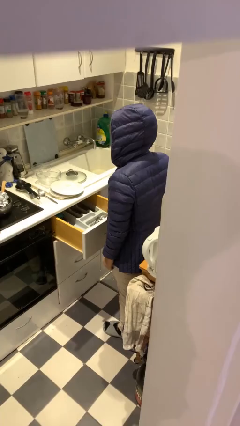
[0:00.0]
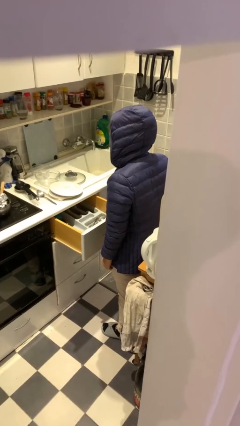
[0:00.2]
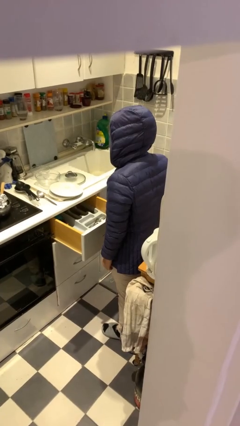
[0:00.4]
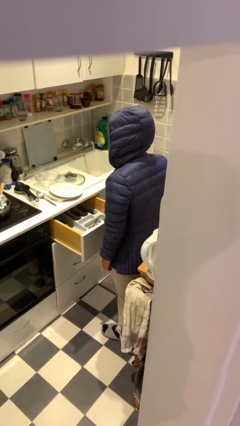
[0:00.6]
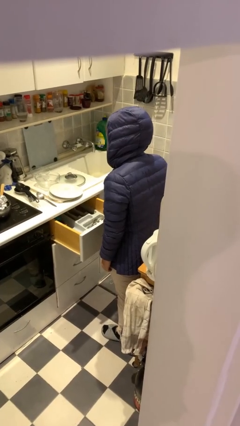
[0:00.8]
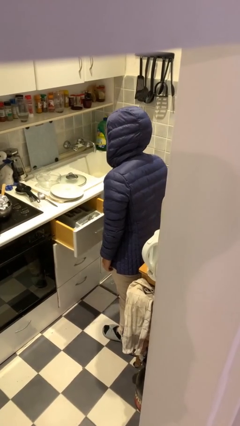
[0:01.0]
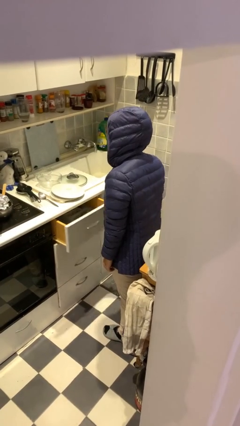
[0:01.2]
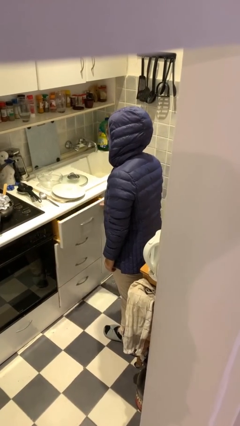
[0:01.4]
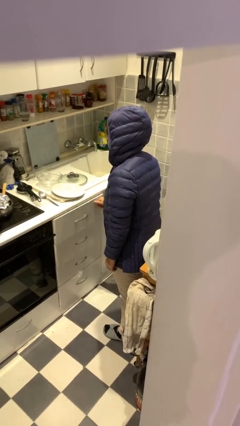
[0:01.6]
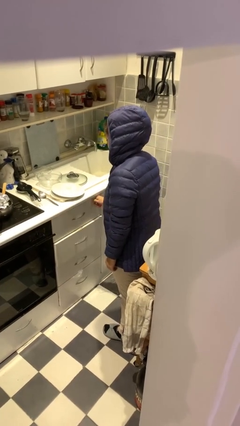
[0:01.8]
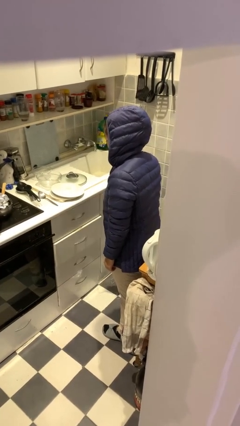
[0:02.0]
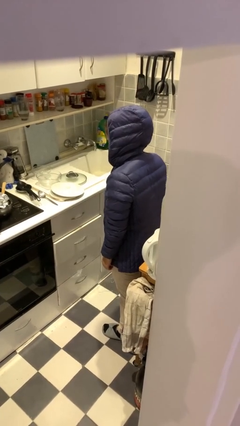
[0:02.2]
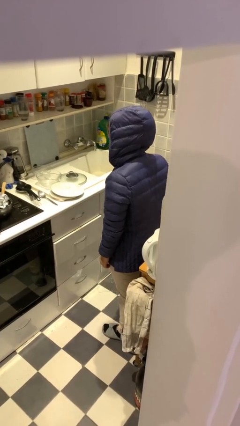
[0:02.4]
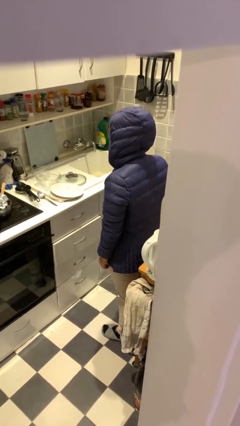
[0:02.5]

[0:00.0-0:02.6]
person closes kitchen drawer

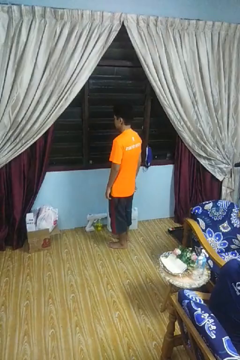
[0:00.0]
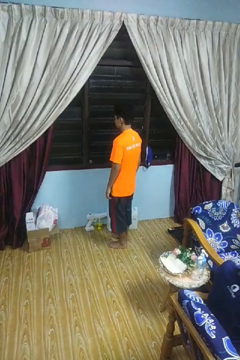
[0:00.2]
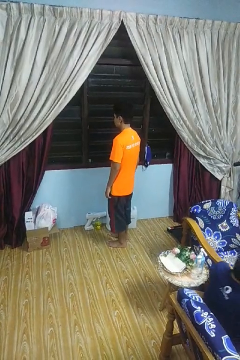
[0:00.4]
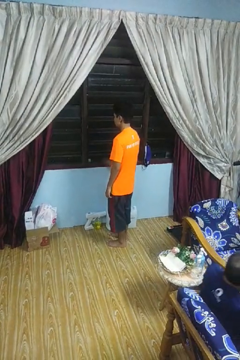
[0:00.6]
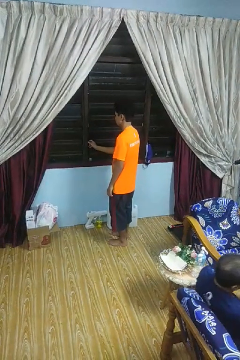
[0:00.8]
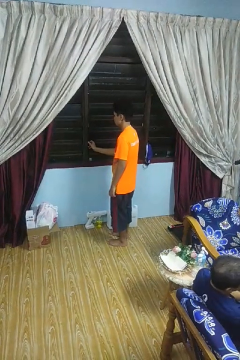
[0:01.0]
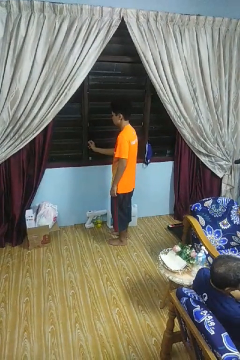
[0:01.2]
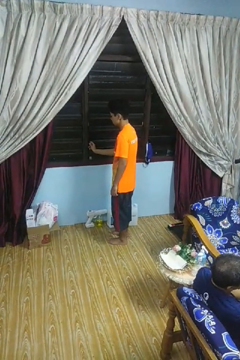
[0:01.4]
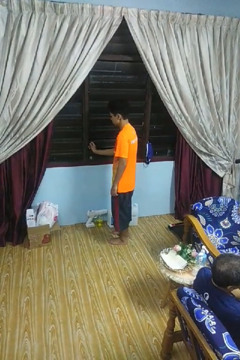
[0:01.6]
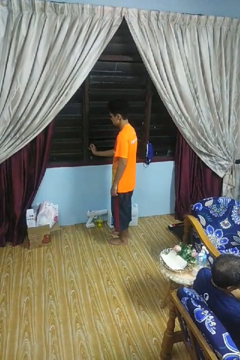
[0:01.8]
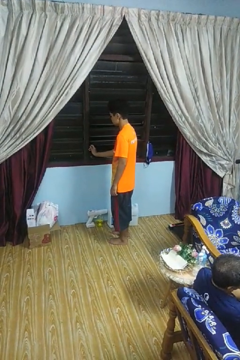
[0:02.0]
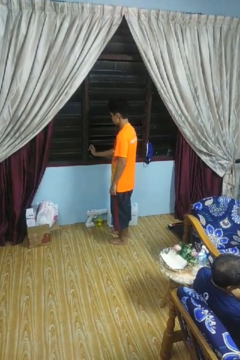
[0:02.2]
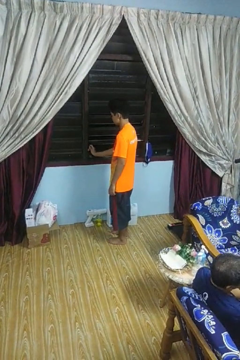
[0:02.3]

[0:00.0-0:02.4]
person opens home window

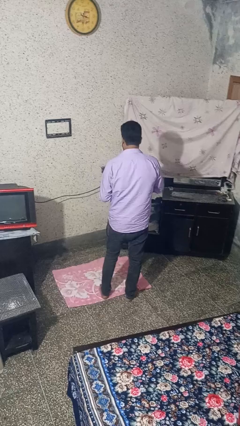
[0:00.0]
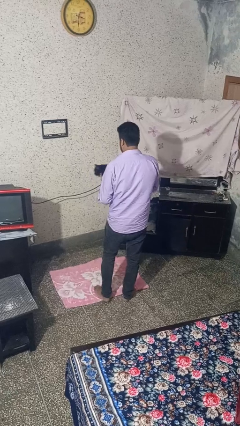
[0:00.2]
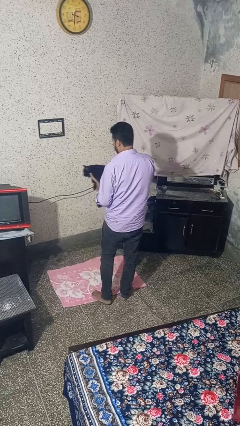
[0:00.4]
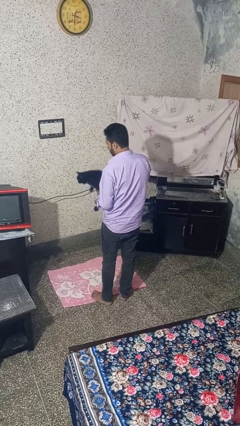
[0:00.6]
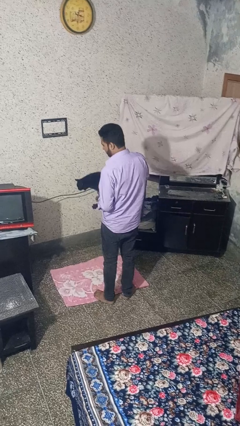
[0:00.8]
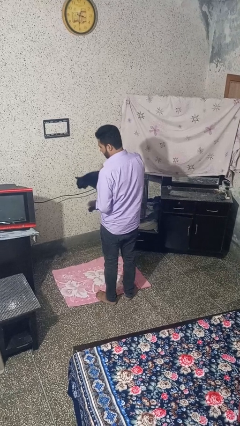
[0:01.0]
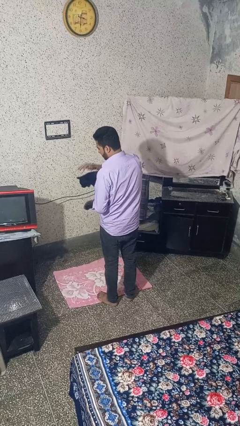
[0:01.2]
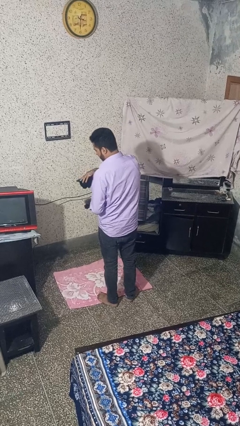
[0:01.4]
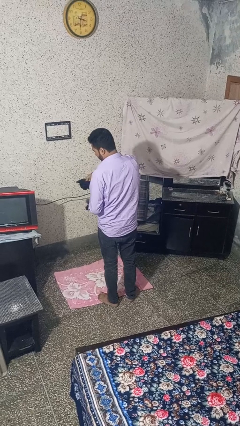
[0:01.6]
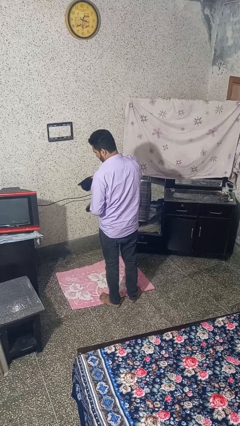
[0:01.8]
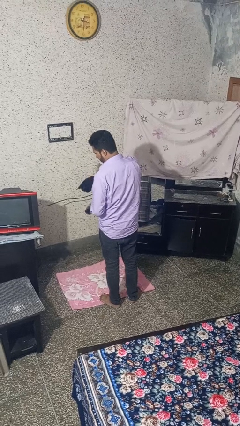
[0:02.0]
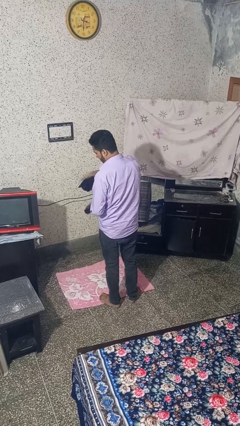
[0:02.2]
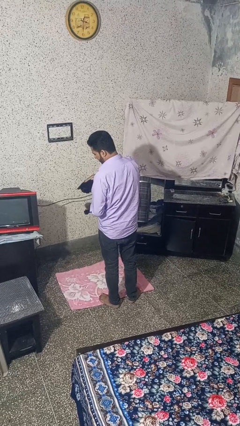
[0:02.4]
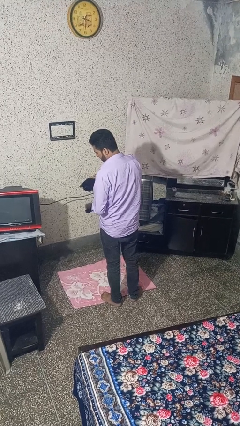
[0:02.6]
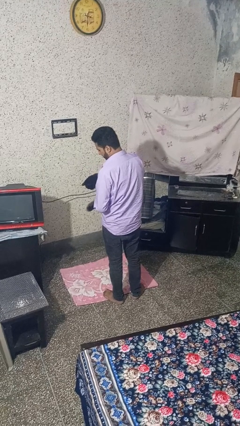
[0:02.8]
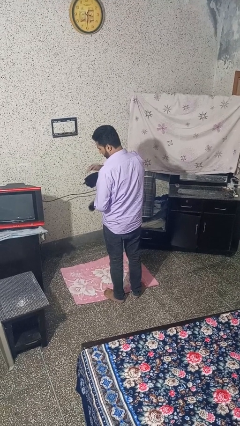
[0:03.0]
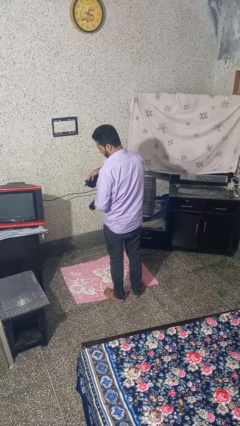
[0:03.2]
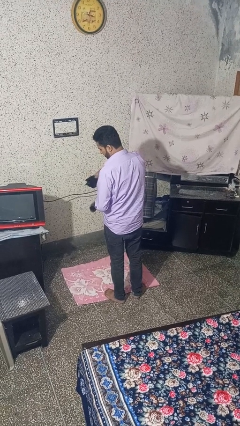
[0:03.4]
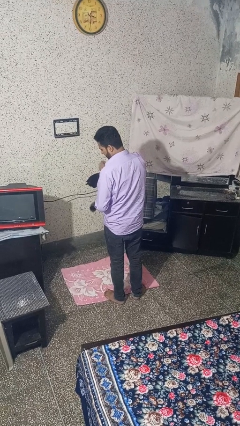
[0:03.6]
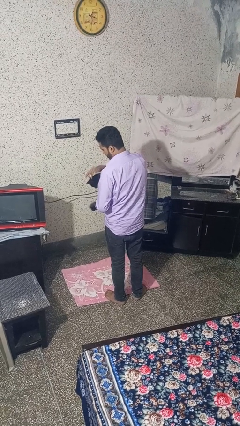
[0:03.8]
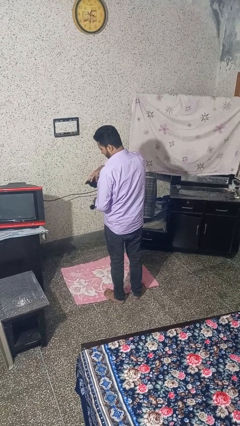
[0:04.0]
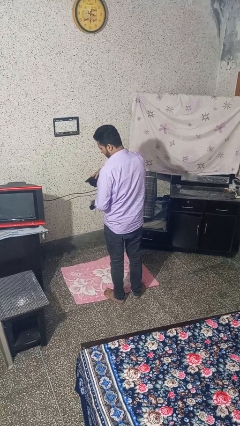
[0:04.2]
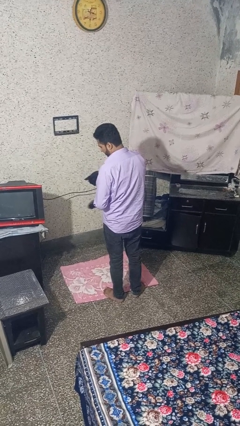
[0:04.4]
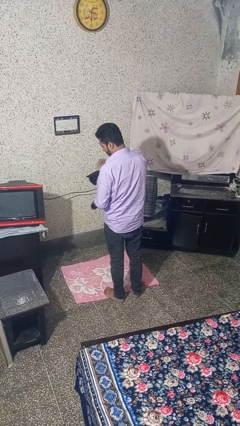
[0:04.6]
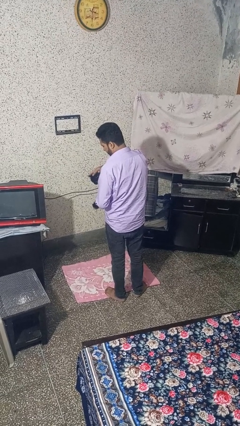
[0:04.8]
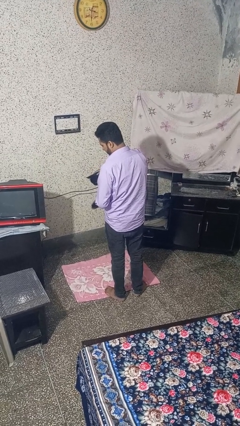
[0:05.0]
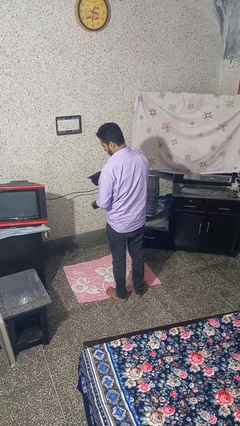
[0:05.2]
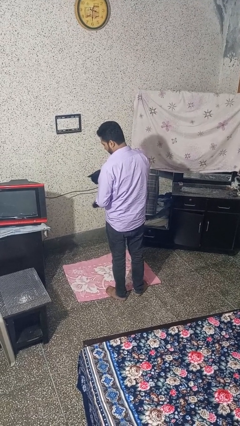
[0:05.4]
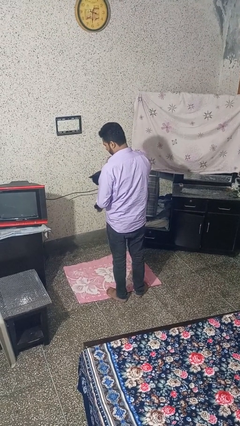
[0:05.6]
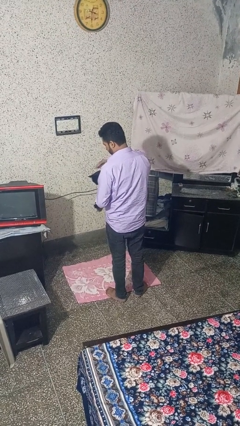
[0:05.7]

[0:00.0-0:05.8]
person pets cat

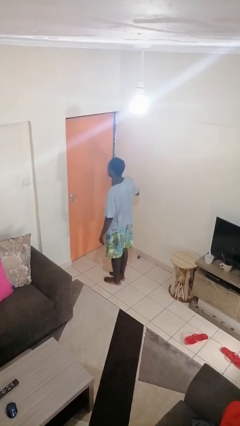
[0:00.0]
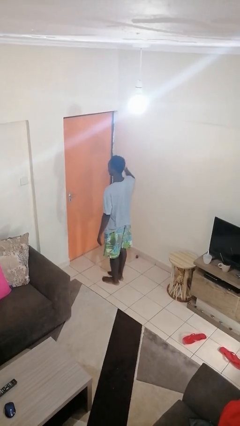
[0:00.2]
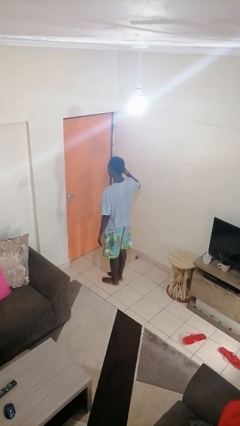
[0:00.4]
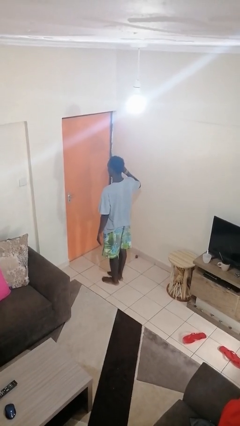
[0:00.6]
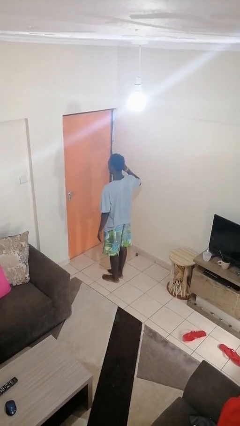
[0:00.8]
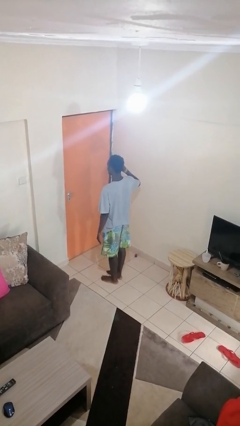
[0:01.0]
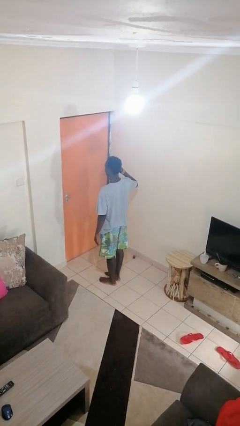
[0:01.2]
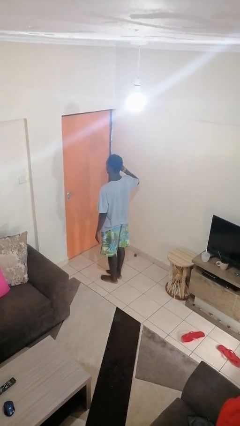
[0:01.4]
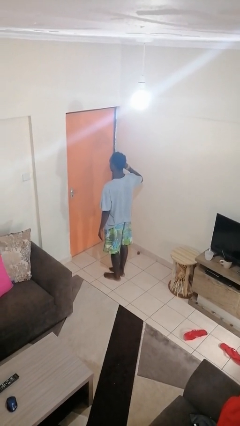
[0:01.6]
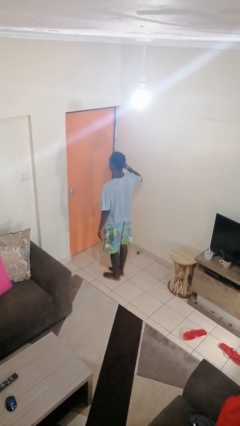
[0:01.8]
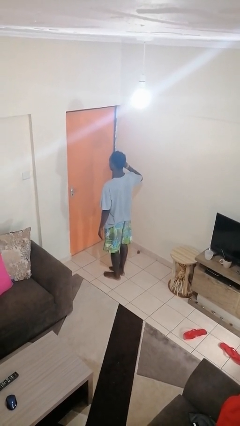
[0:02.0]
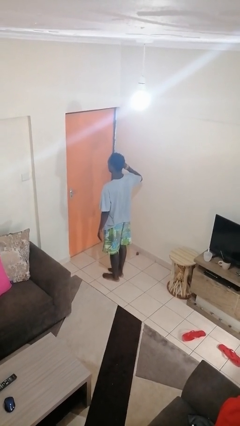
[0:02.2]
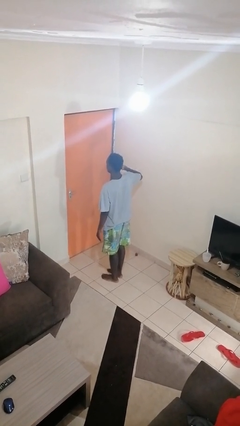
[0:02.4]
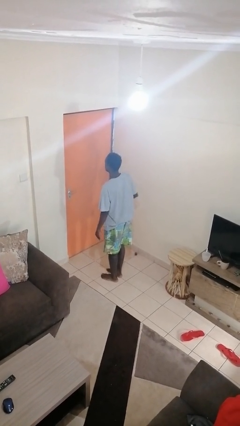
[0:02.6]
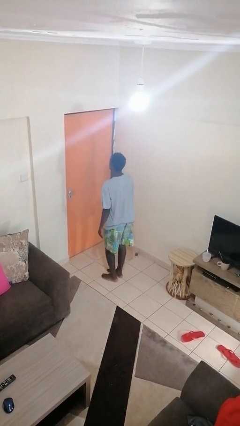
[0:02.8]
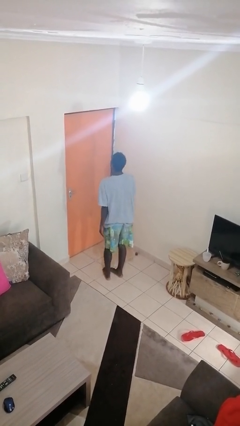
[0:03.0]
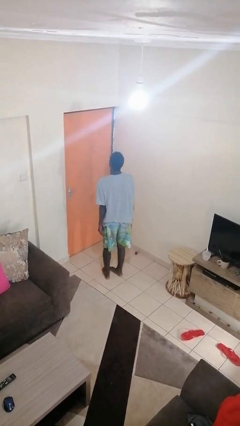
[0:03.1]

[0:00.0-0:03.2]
person salutes

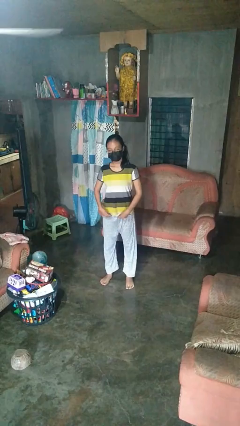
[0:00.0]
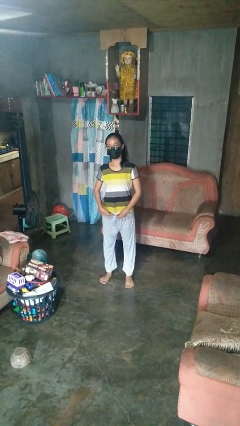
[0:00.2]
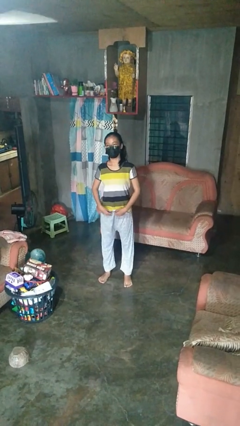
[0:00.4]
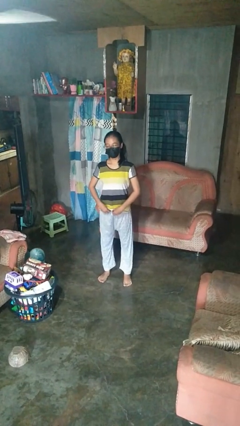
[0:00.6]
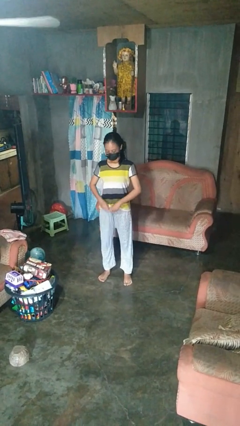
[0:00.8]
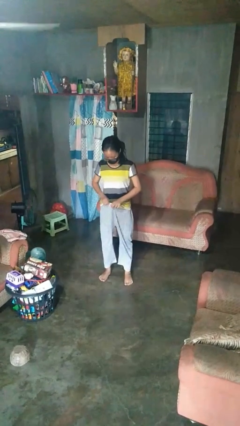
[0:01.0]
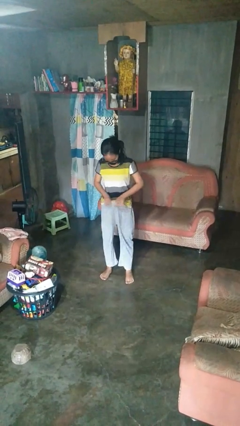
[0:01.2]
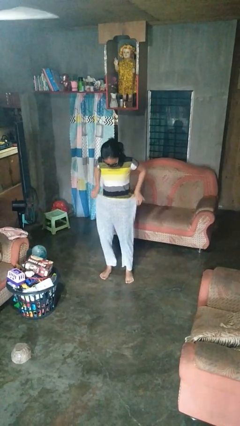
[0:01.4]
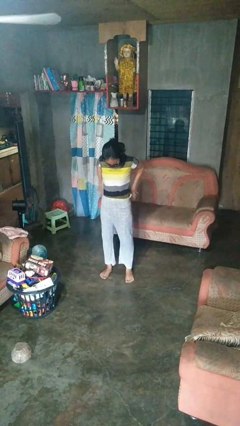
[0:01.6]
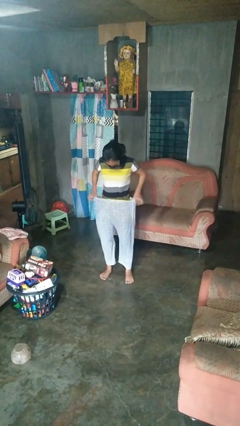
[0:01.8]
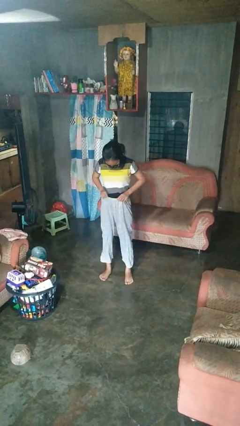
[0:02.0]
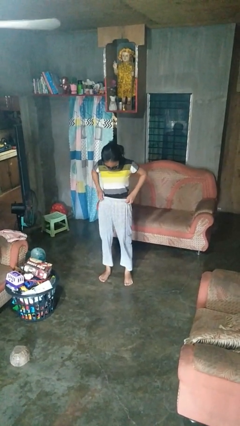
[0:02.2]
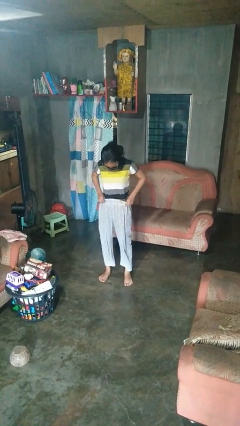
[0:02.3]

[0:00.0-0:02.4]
person tucks in shirt

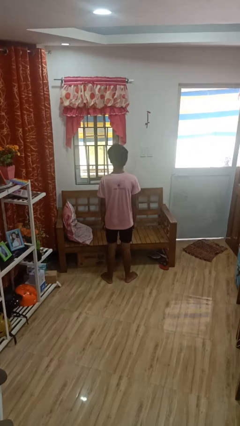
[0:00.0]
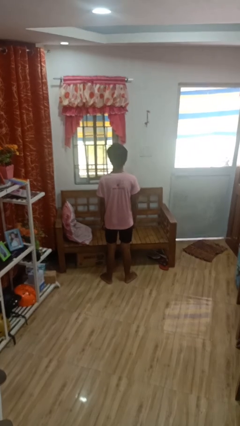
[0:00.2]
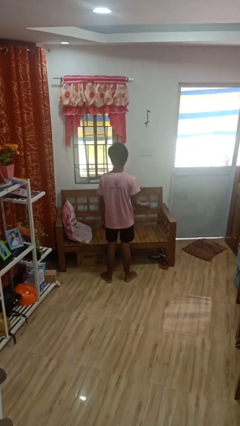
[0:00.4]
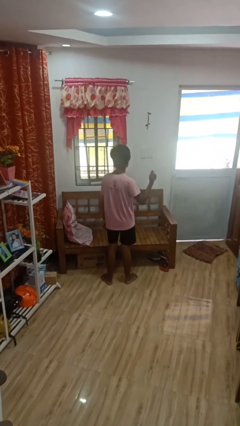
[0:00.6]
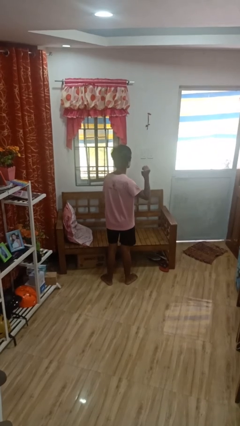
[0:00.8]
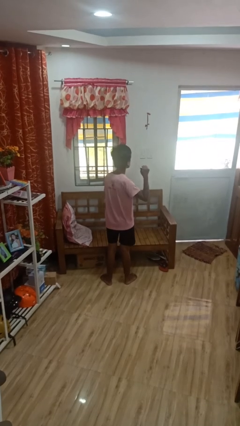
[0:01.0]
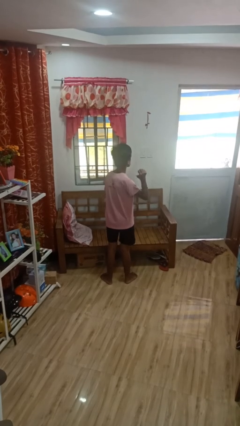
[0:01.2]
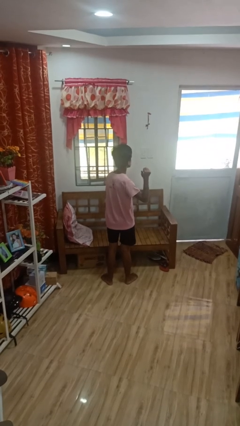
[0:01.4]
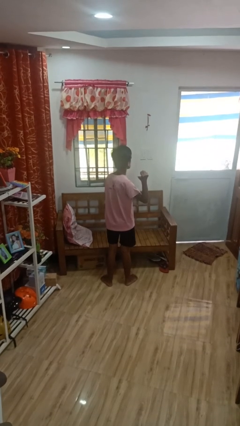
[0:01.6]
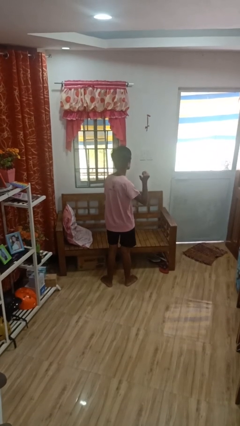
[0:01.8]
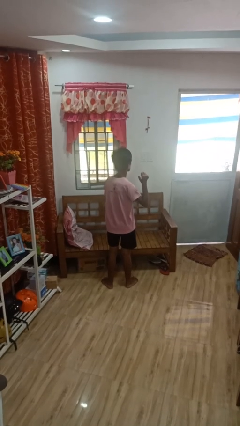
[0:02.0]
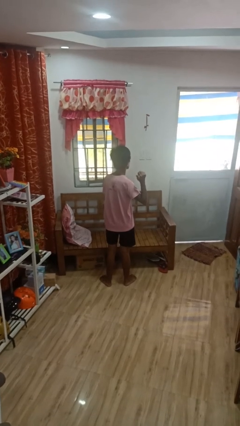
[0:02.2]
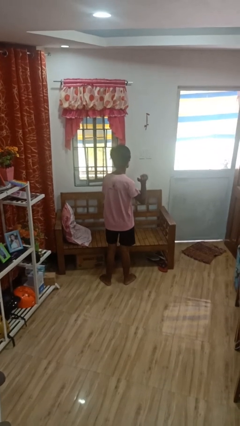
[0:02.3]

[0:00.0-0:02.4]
person gestures behind me
